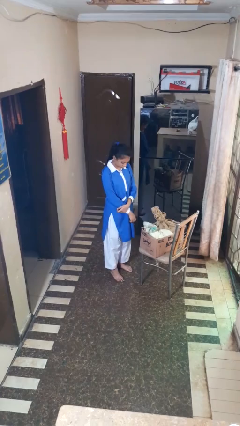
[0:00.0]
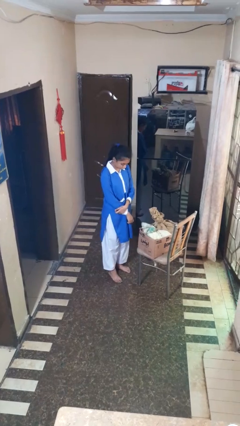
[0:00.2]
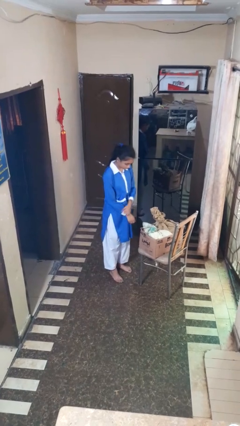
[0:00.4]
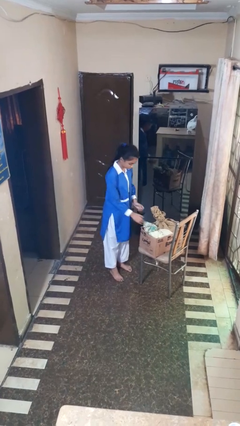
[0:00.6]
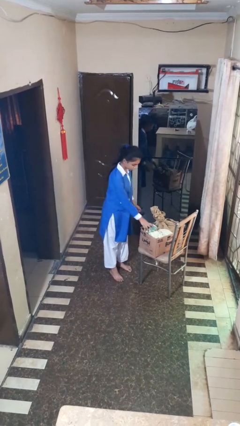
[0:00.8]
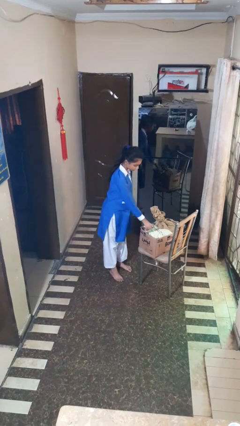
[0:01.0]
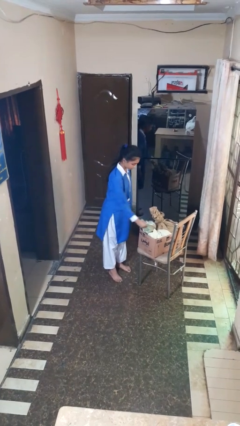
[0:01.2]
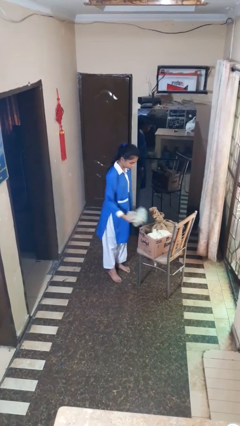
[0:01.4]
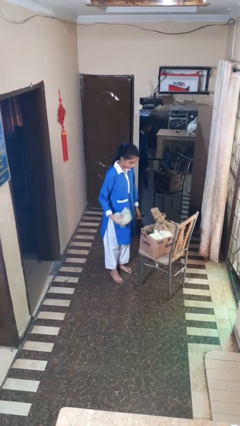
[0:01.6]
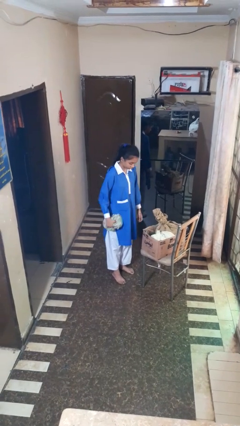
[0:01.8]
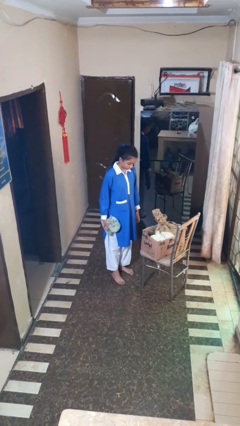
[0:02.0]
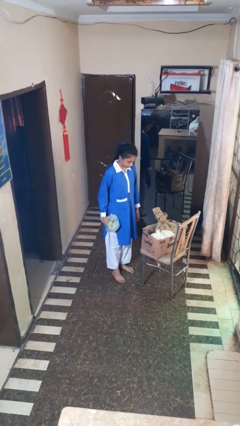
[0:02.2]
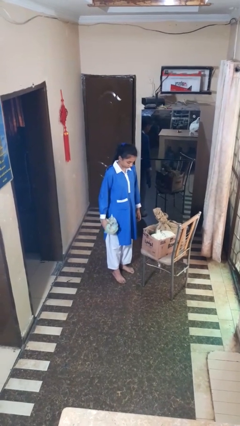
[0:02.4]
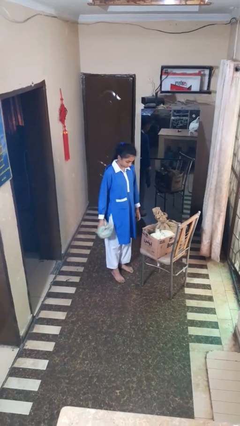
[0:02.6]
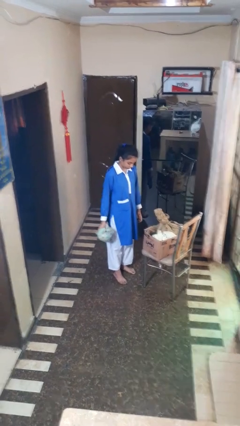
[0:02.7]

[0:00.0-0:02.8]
person takes object from box

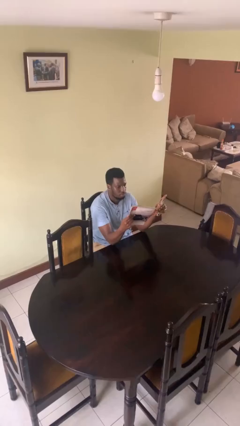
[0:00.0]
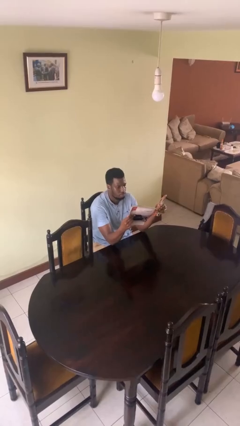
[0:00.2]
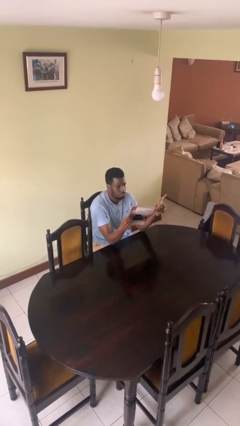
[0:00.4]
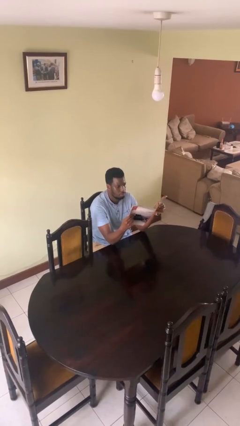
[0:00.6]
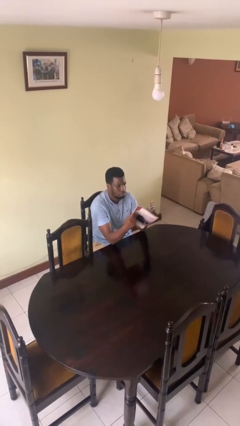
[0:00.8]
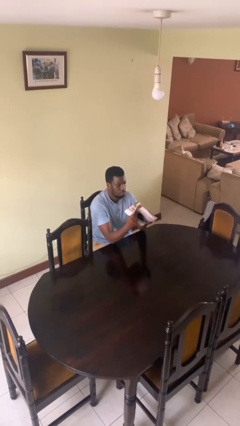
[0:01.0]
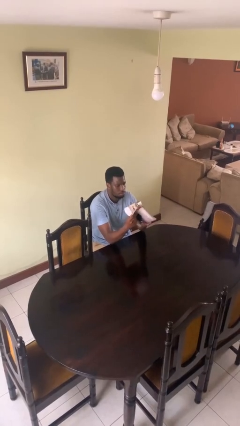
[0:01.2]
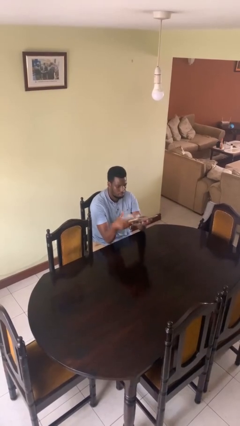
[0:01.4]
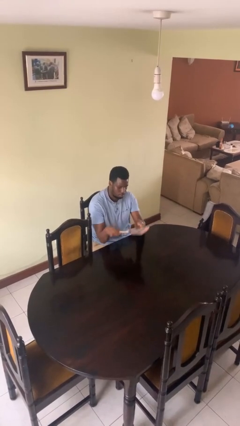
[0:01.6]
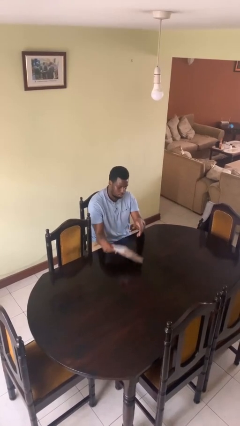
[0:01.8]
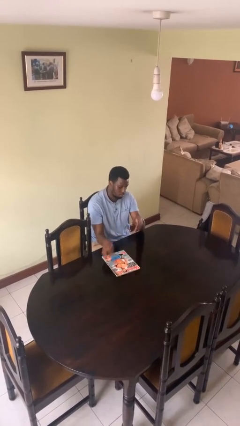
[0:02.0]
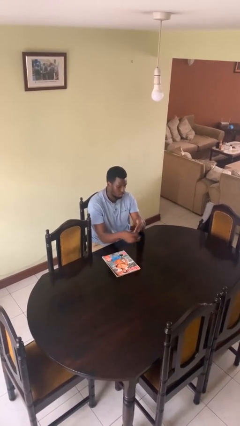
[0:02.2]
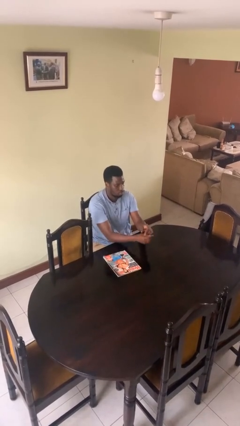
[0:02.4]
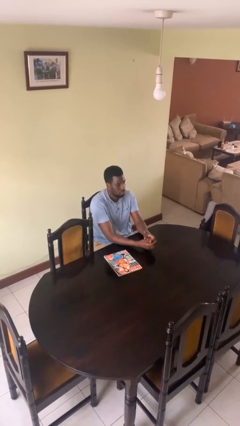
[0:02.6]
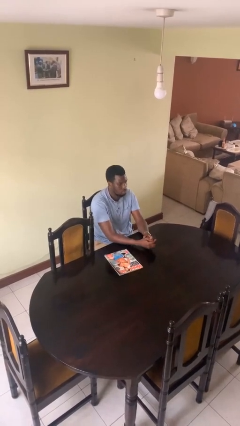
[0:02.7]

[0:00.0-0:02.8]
person puts down object on table

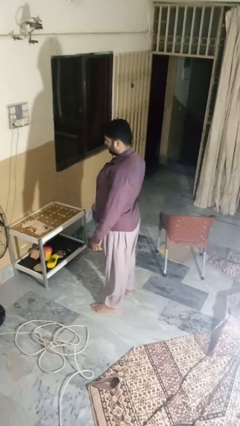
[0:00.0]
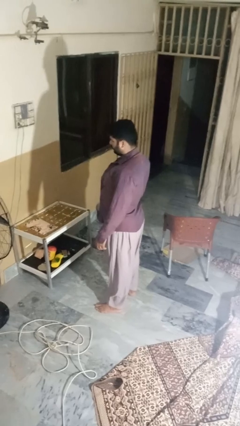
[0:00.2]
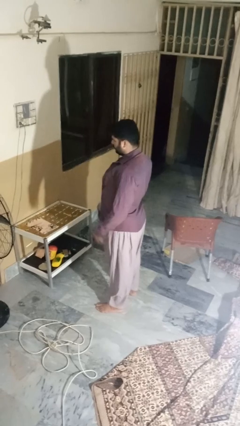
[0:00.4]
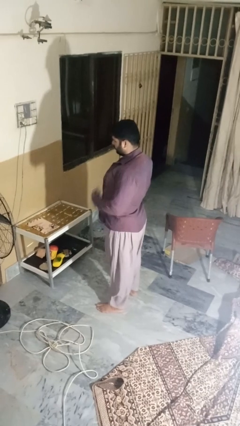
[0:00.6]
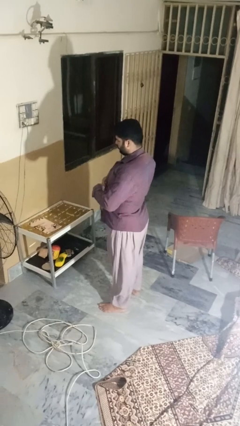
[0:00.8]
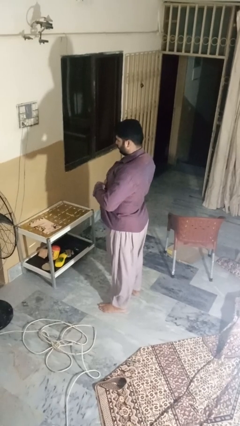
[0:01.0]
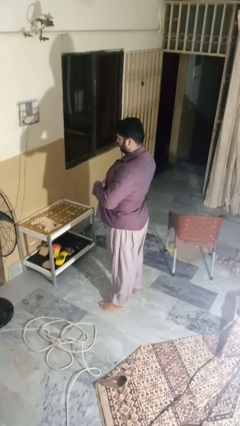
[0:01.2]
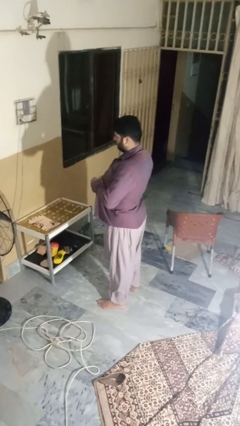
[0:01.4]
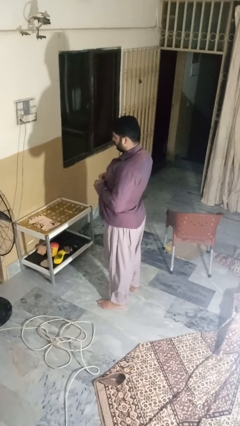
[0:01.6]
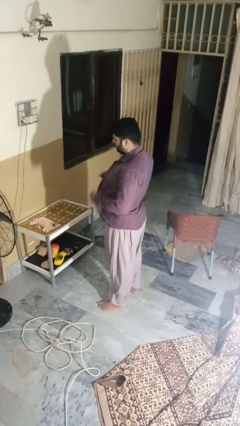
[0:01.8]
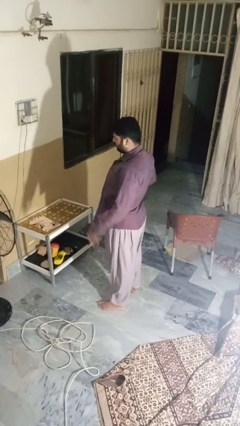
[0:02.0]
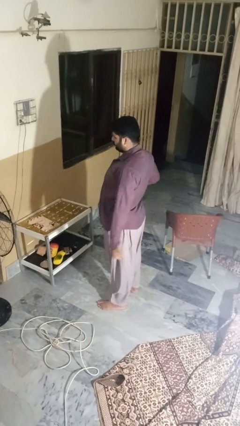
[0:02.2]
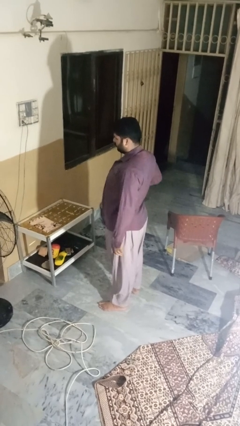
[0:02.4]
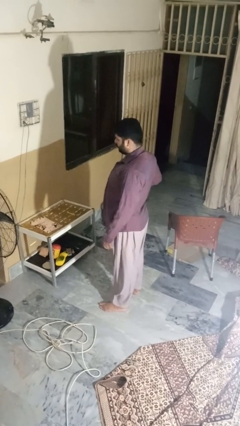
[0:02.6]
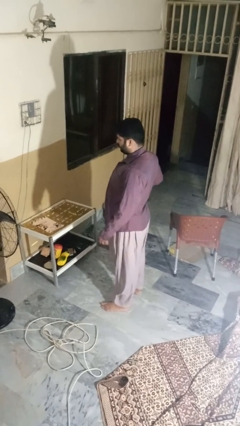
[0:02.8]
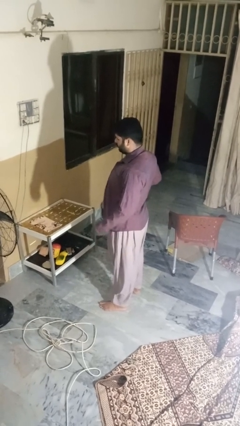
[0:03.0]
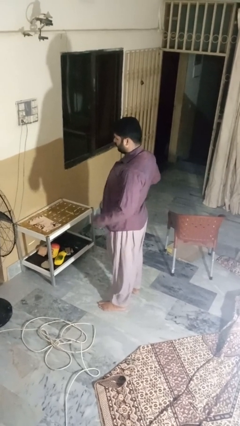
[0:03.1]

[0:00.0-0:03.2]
person unbuttons shirt

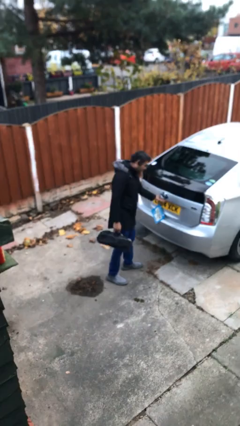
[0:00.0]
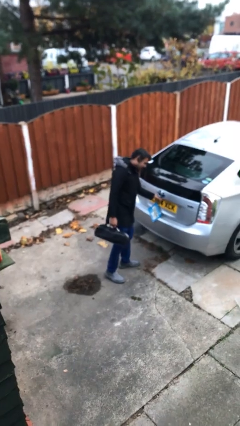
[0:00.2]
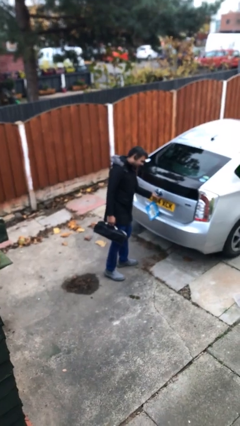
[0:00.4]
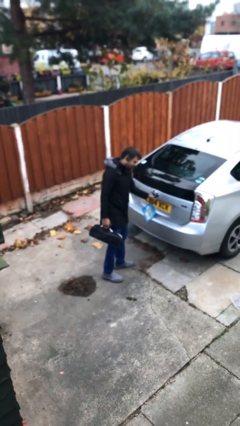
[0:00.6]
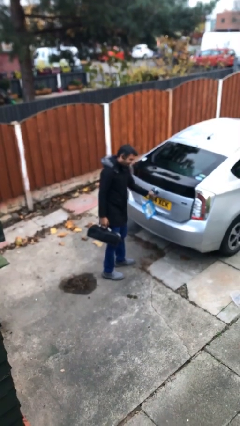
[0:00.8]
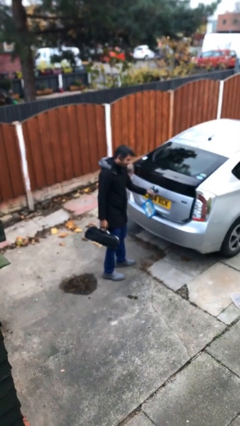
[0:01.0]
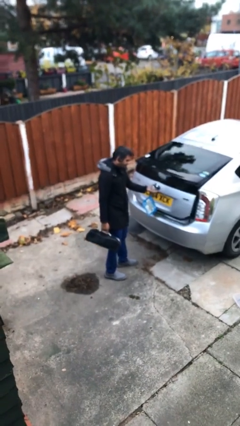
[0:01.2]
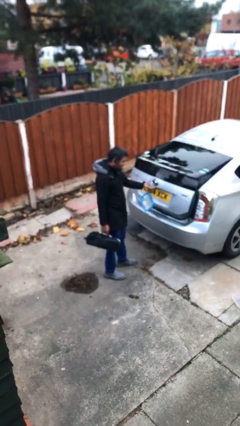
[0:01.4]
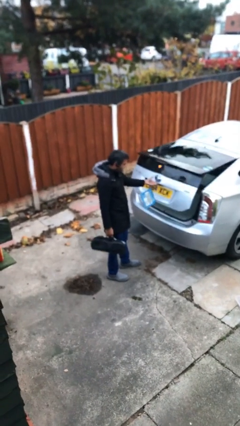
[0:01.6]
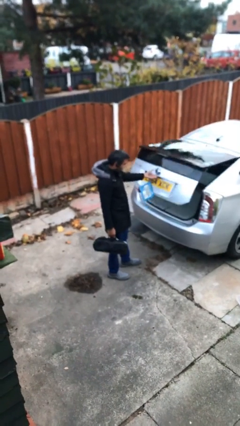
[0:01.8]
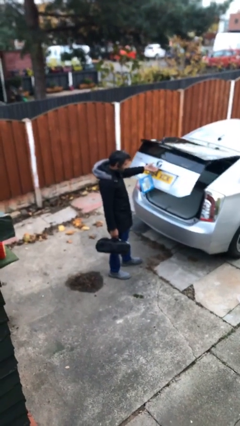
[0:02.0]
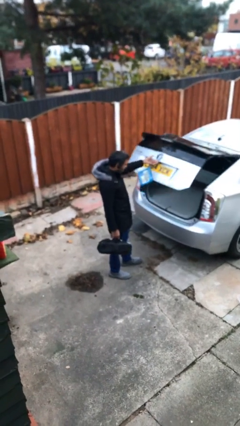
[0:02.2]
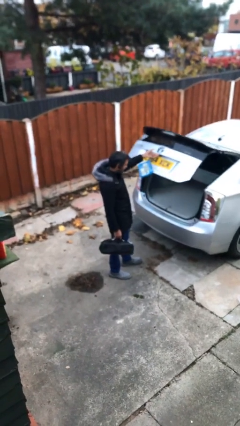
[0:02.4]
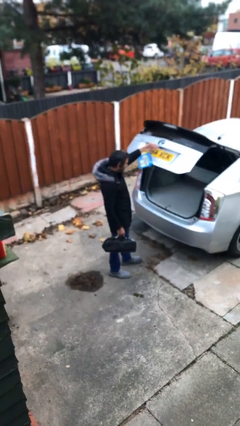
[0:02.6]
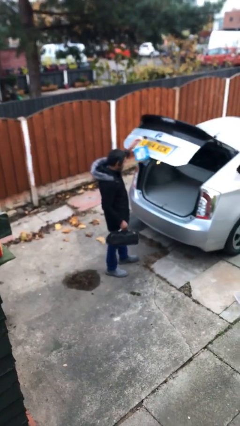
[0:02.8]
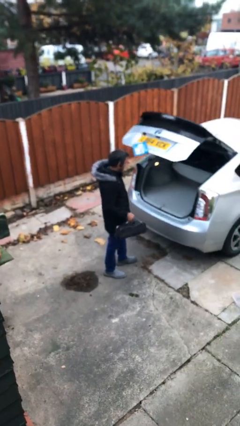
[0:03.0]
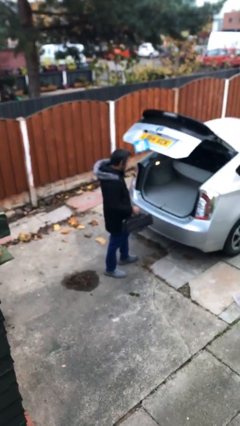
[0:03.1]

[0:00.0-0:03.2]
person opens car trunk

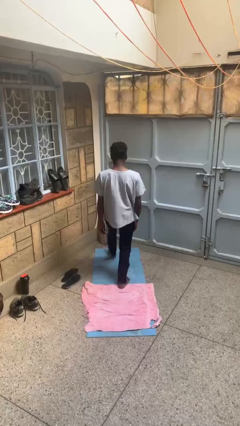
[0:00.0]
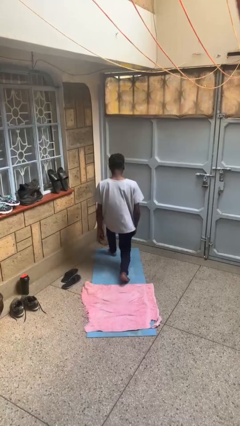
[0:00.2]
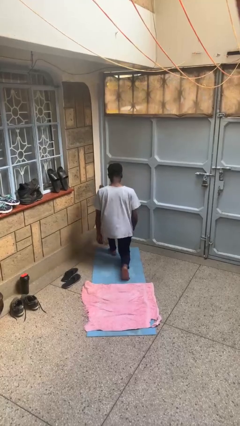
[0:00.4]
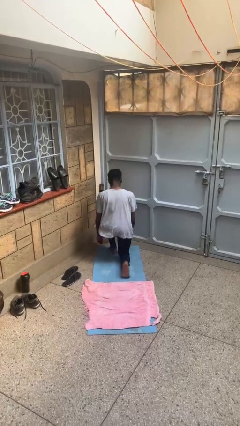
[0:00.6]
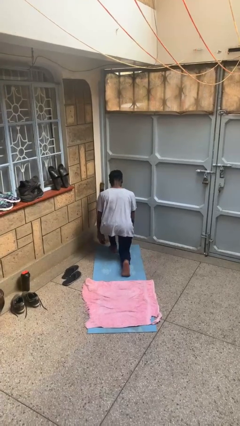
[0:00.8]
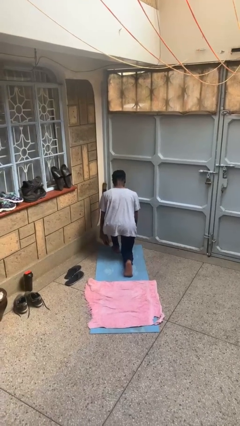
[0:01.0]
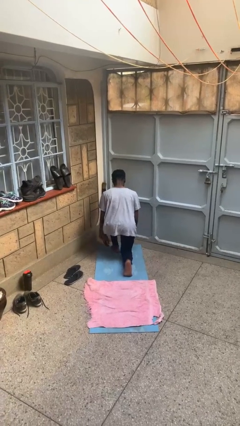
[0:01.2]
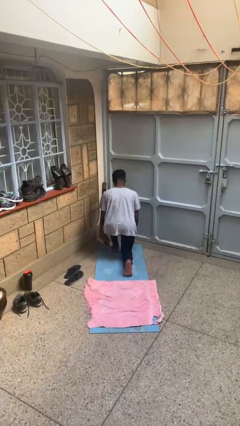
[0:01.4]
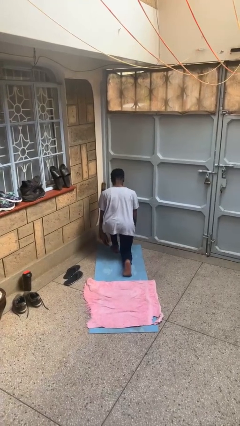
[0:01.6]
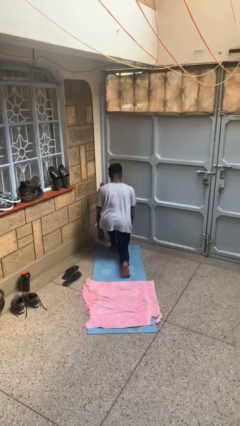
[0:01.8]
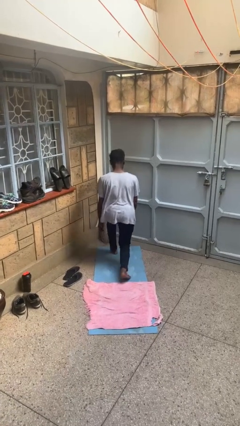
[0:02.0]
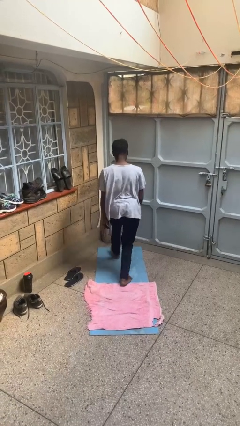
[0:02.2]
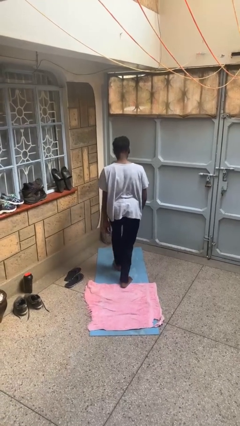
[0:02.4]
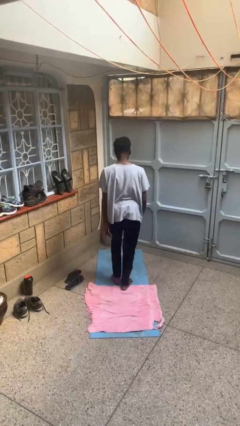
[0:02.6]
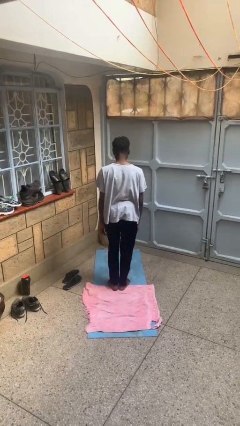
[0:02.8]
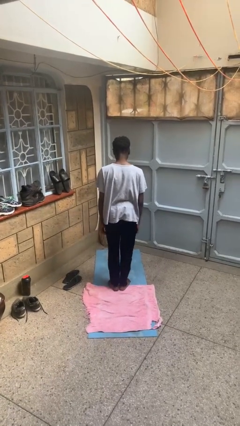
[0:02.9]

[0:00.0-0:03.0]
person exercises with lunges

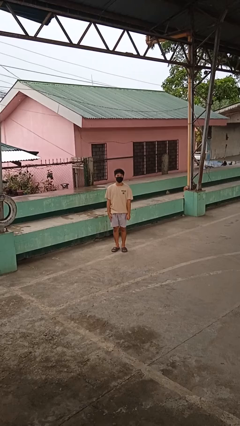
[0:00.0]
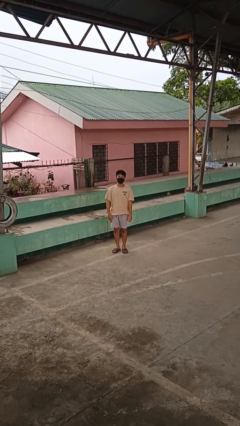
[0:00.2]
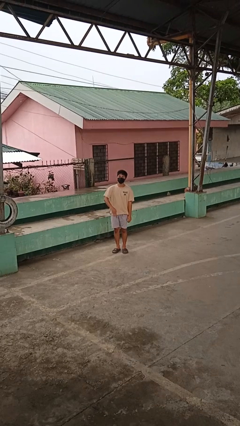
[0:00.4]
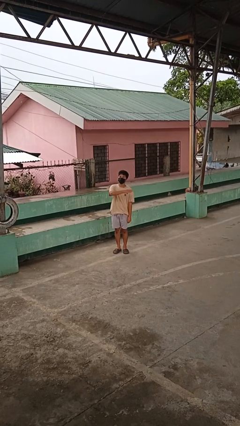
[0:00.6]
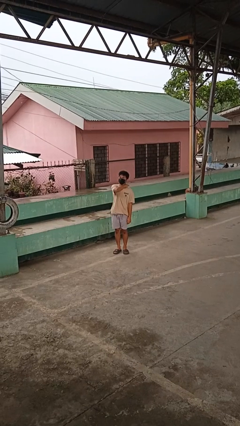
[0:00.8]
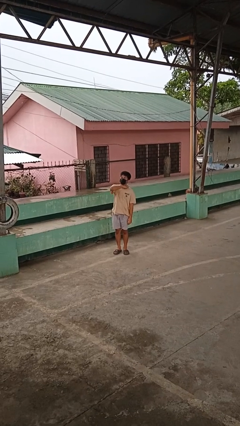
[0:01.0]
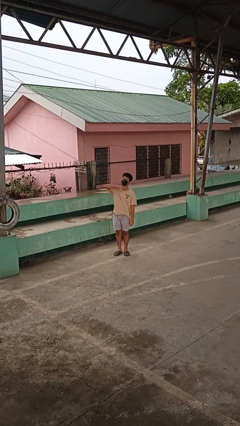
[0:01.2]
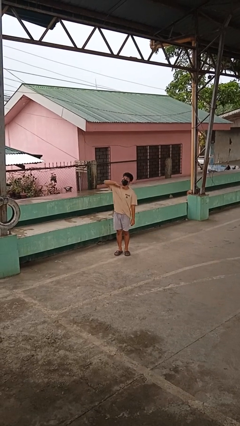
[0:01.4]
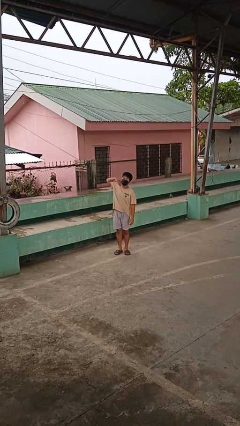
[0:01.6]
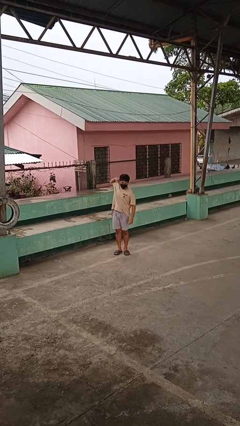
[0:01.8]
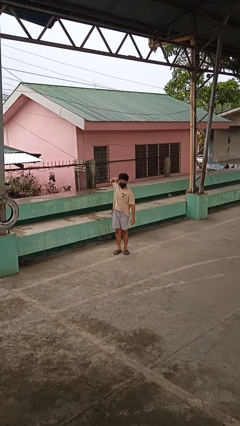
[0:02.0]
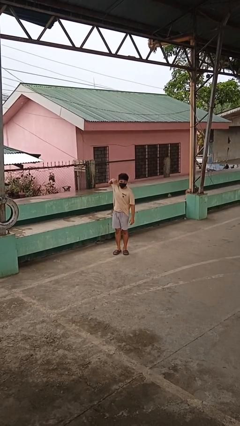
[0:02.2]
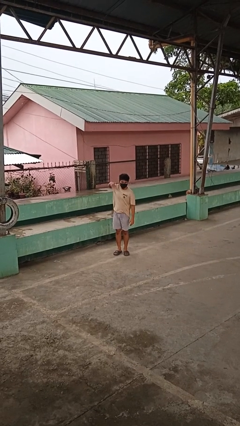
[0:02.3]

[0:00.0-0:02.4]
person gestures cut
